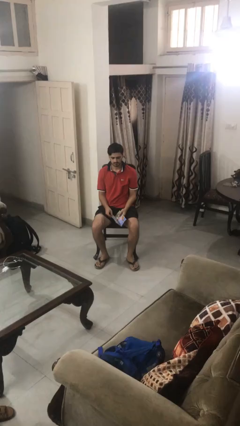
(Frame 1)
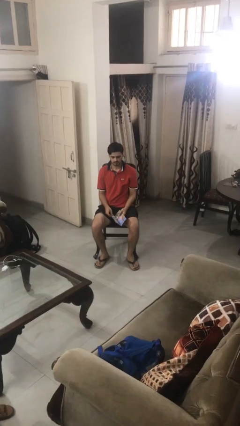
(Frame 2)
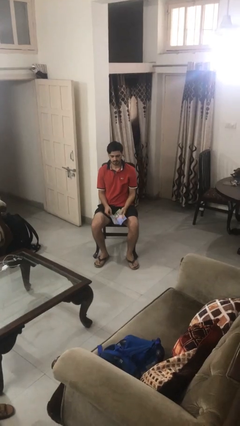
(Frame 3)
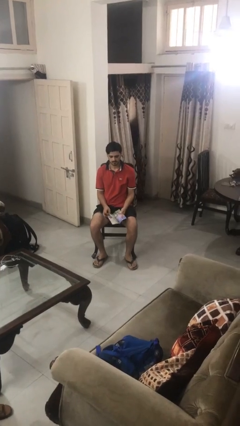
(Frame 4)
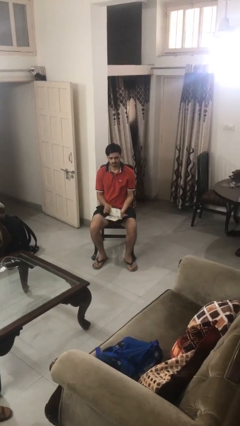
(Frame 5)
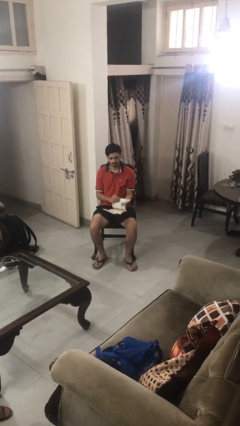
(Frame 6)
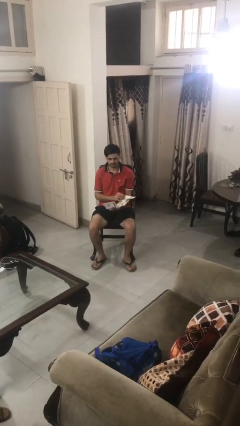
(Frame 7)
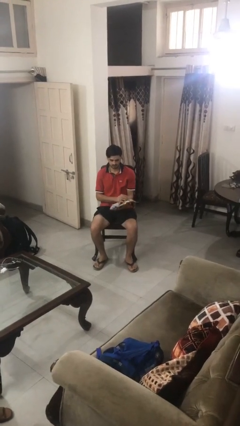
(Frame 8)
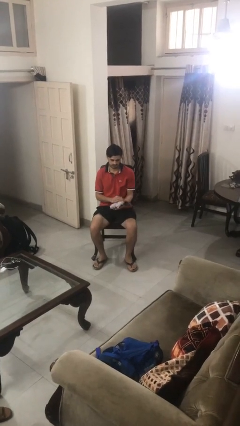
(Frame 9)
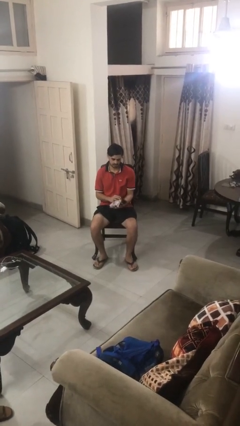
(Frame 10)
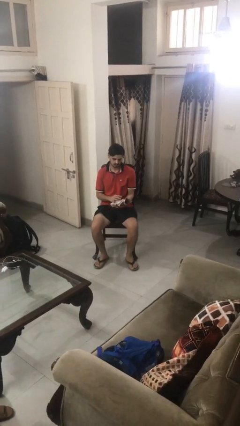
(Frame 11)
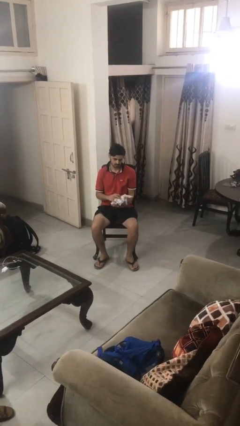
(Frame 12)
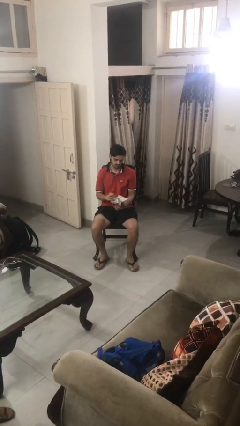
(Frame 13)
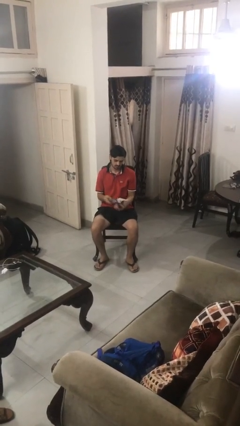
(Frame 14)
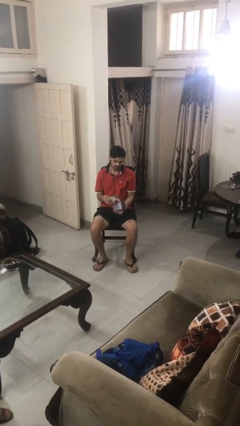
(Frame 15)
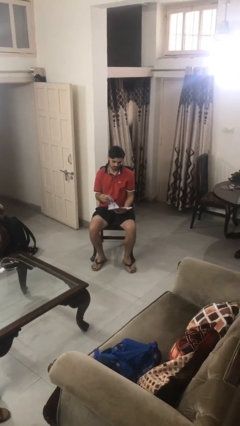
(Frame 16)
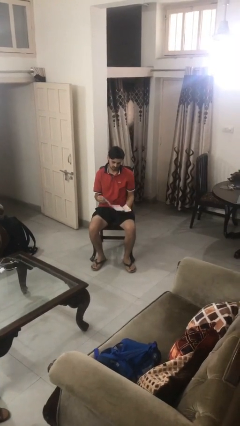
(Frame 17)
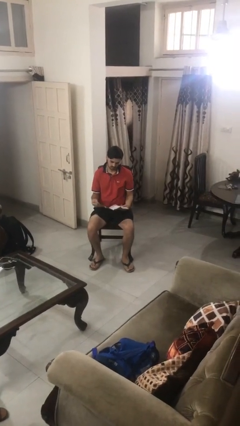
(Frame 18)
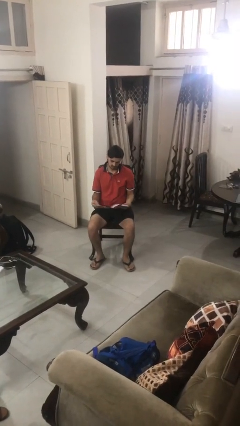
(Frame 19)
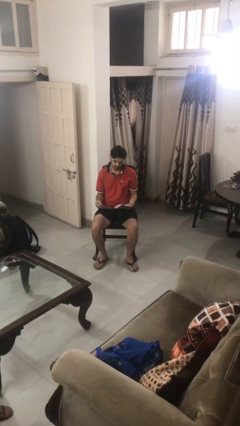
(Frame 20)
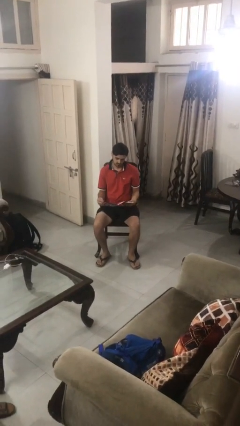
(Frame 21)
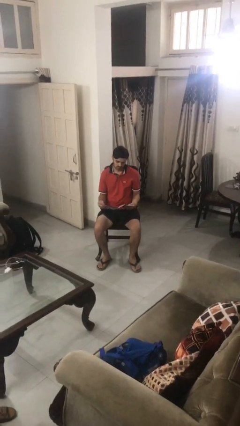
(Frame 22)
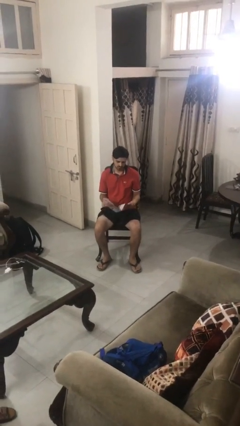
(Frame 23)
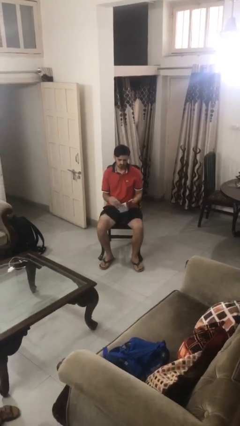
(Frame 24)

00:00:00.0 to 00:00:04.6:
person reads magazine

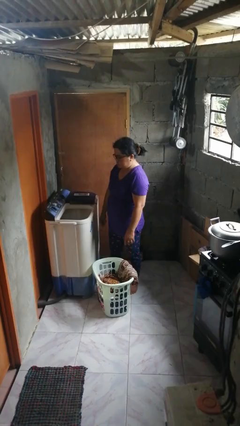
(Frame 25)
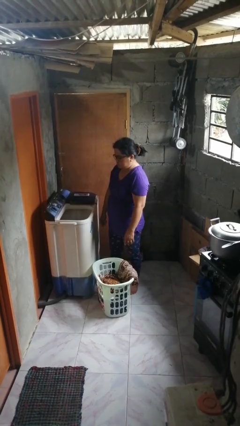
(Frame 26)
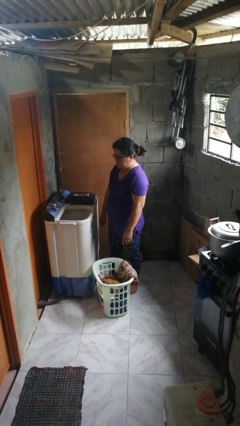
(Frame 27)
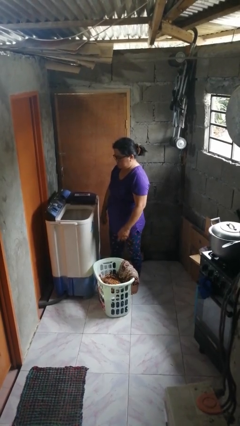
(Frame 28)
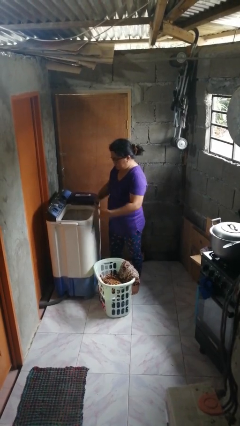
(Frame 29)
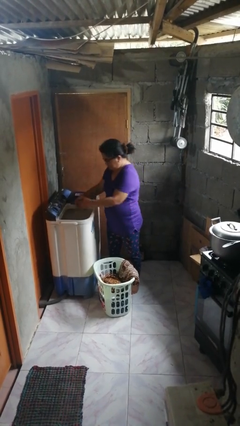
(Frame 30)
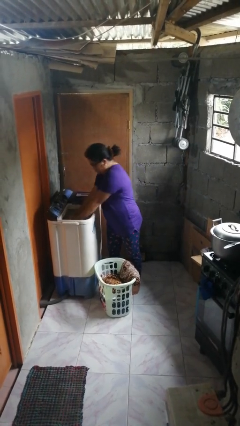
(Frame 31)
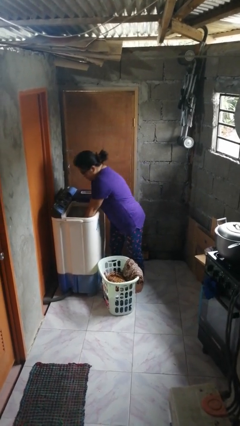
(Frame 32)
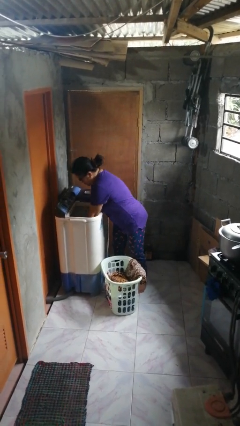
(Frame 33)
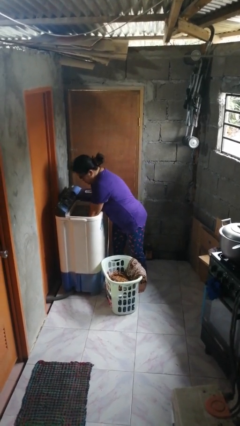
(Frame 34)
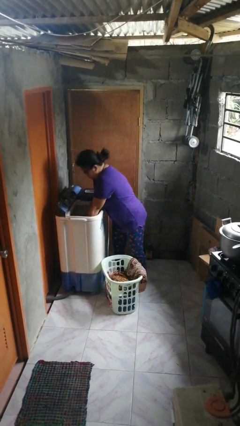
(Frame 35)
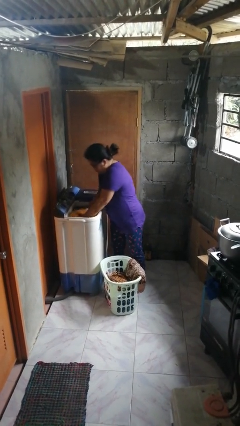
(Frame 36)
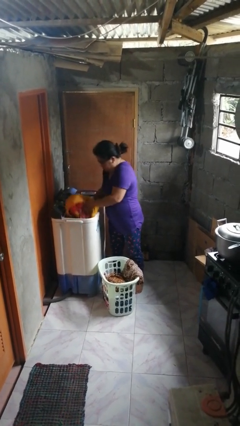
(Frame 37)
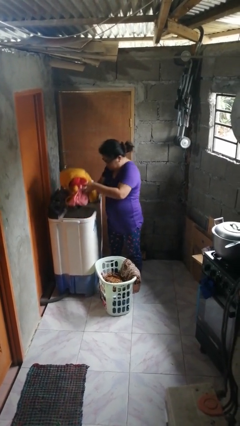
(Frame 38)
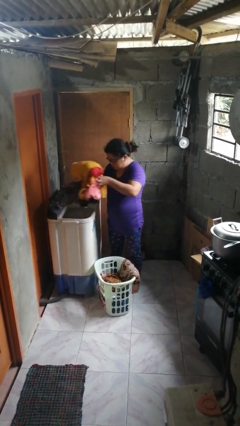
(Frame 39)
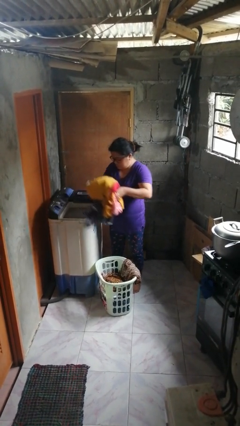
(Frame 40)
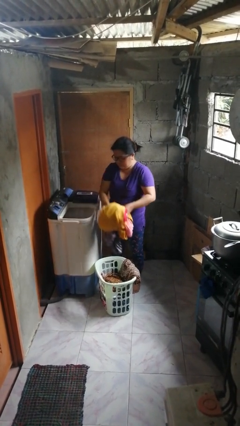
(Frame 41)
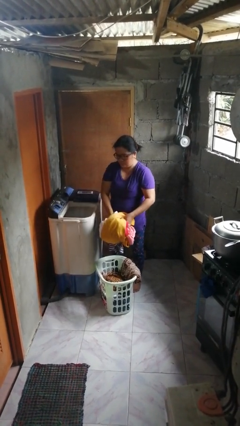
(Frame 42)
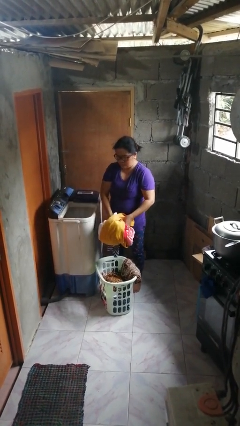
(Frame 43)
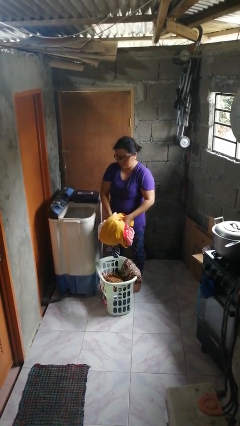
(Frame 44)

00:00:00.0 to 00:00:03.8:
person unloads clotheswasher

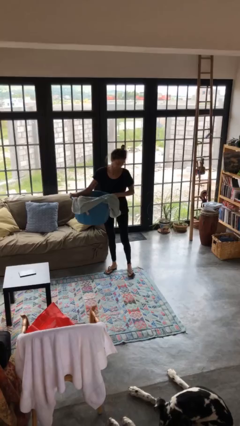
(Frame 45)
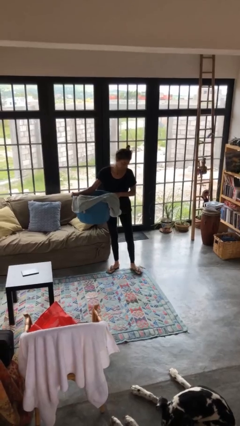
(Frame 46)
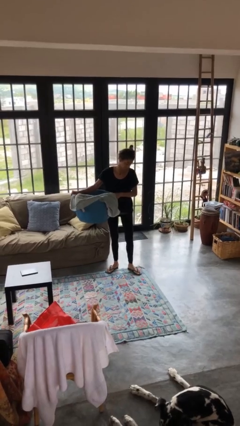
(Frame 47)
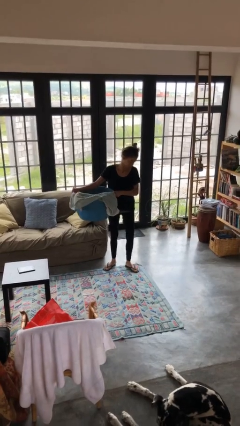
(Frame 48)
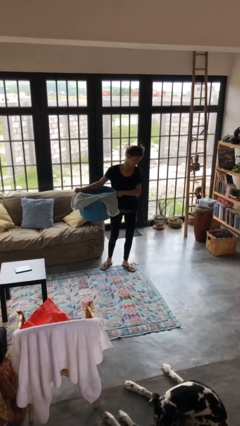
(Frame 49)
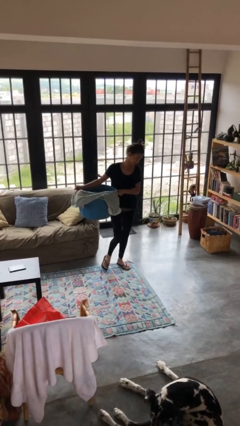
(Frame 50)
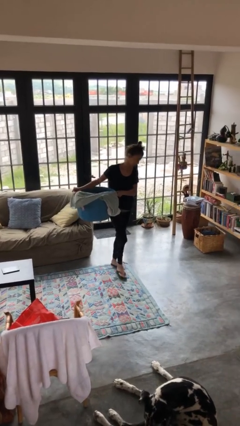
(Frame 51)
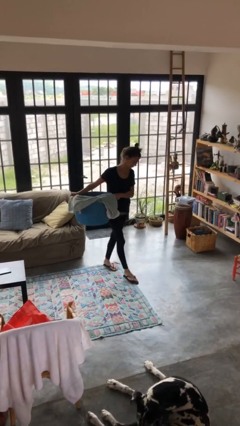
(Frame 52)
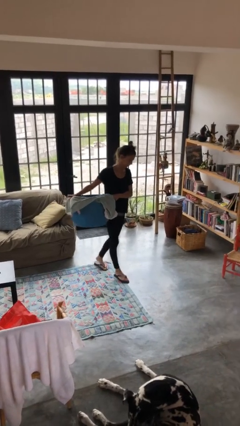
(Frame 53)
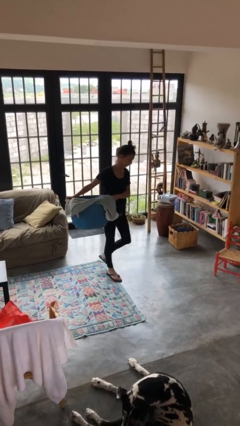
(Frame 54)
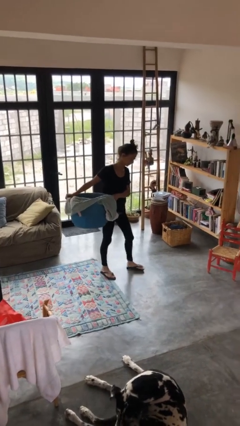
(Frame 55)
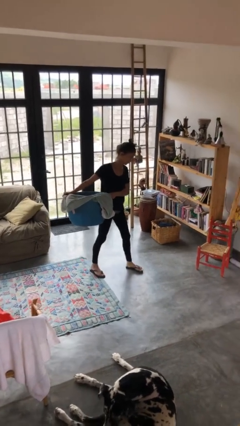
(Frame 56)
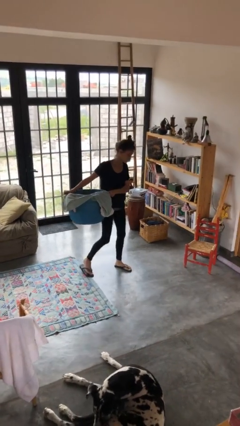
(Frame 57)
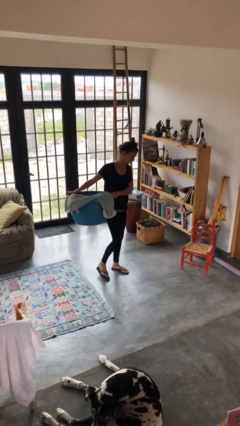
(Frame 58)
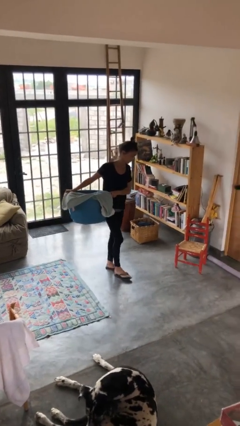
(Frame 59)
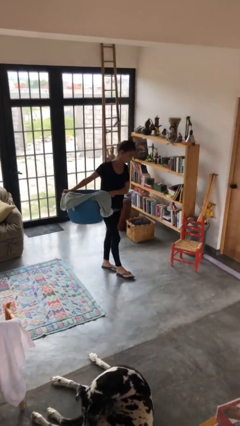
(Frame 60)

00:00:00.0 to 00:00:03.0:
person carries laundry basket

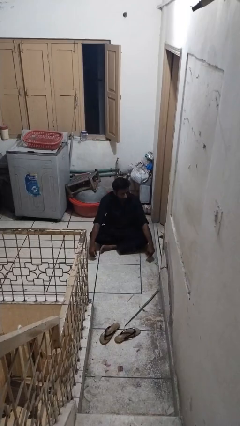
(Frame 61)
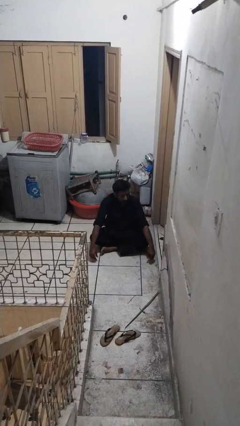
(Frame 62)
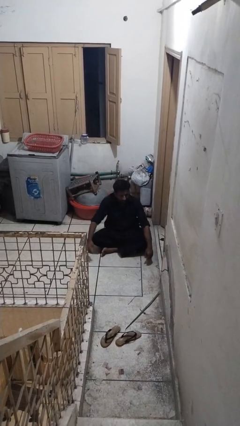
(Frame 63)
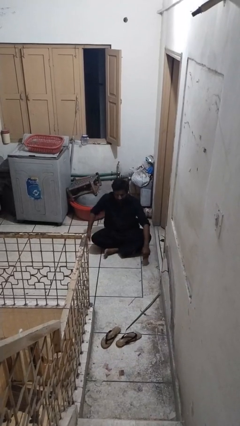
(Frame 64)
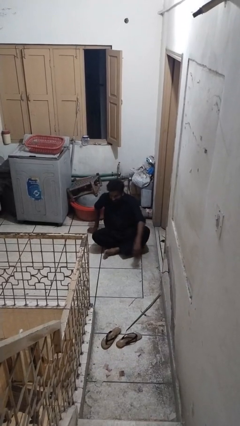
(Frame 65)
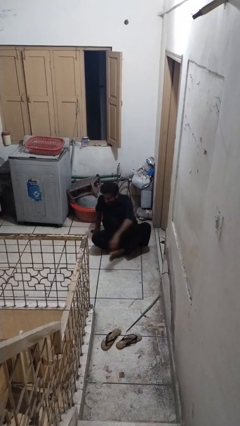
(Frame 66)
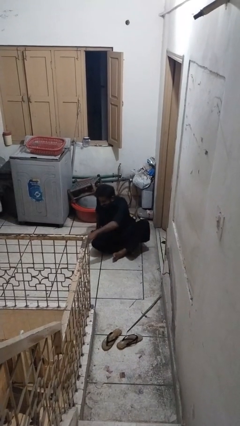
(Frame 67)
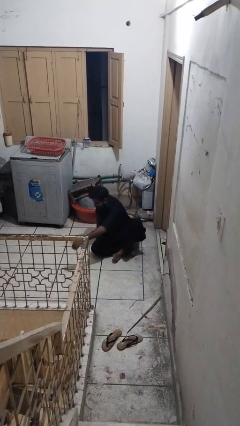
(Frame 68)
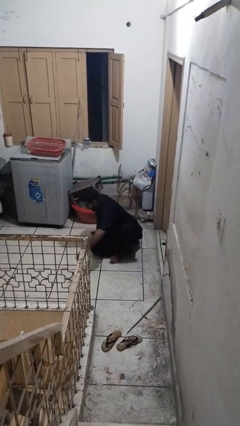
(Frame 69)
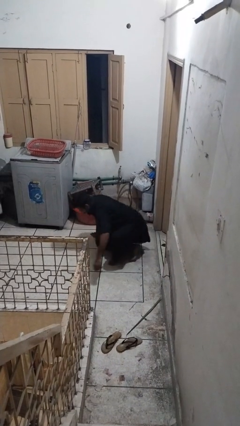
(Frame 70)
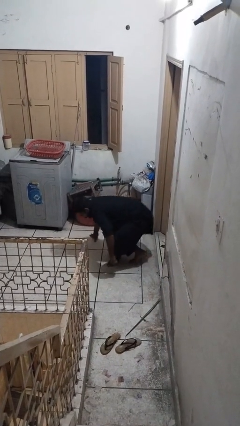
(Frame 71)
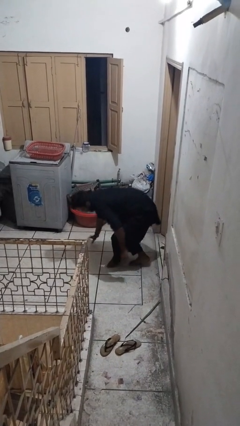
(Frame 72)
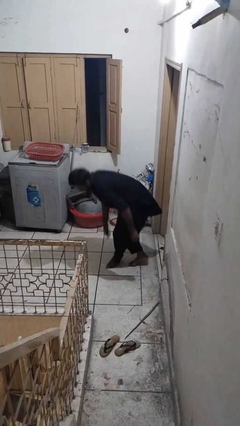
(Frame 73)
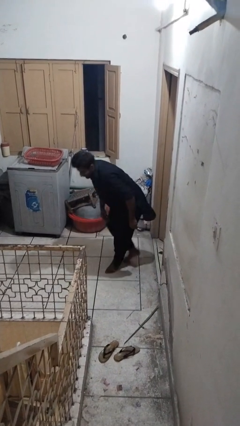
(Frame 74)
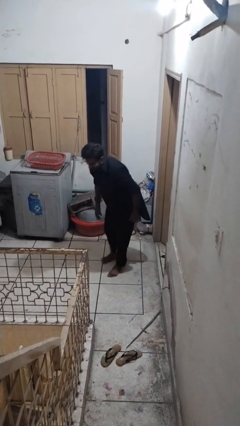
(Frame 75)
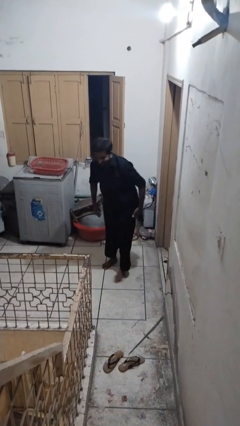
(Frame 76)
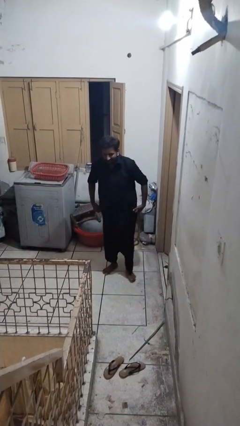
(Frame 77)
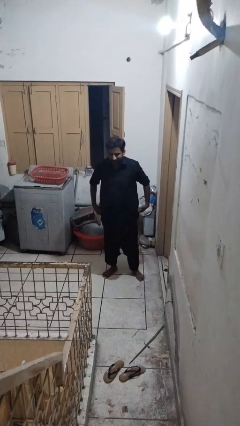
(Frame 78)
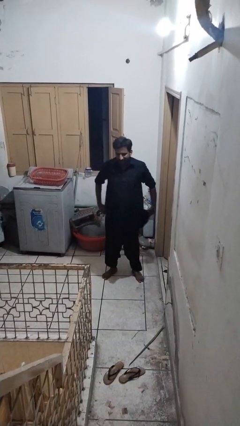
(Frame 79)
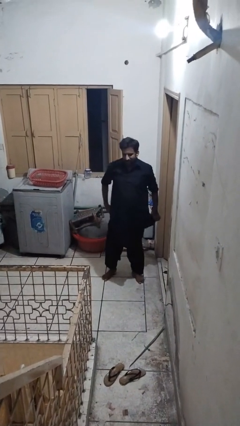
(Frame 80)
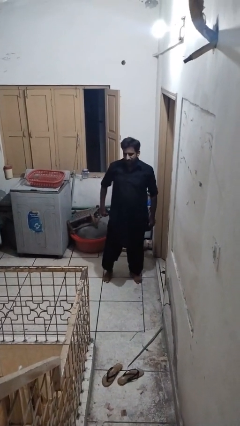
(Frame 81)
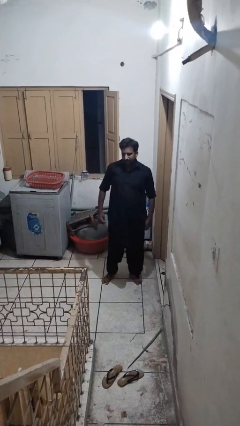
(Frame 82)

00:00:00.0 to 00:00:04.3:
person stands up from floor

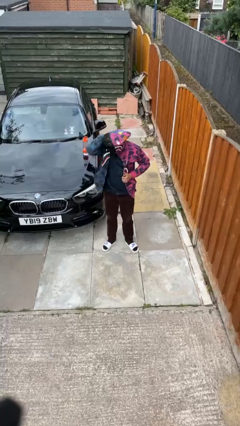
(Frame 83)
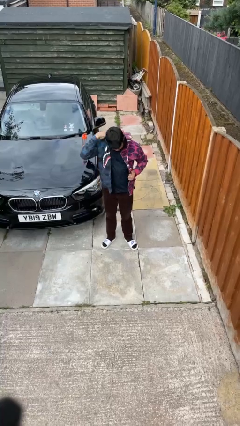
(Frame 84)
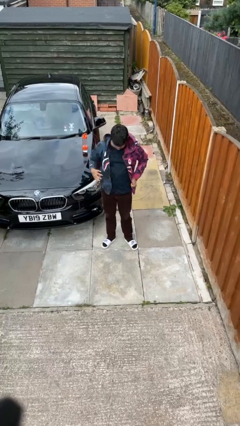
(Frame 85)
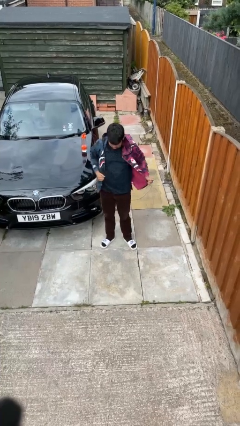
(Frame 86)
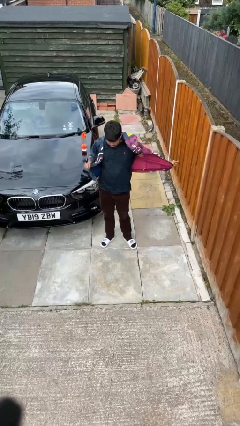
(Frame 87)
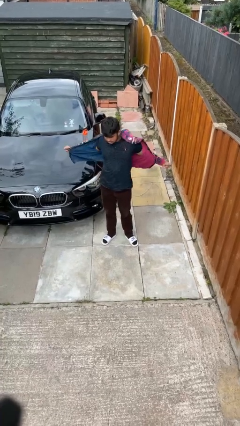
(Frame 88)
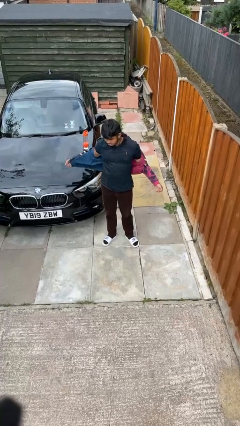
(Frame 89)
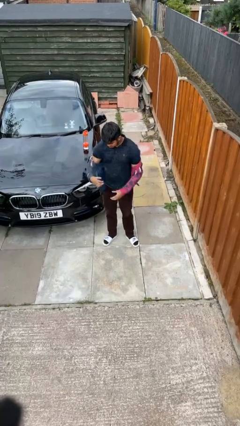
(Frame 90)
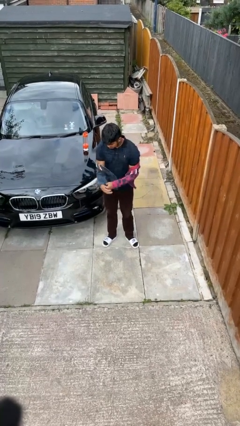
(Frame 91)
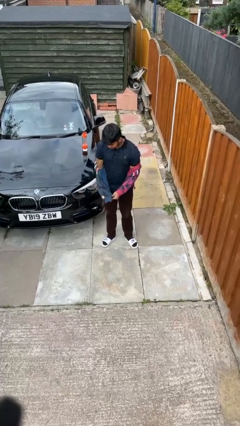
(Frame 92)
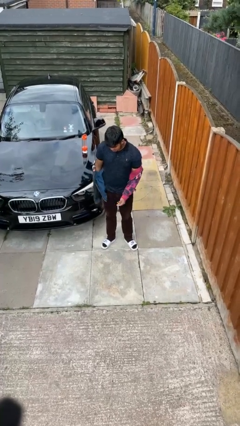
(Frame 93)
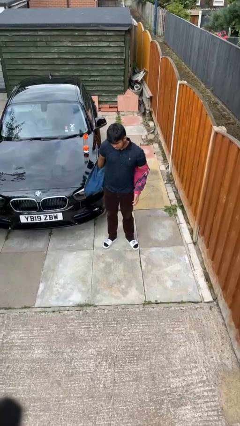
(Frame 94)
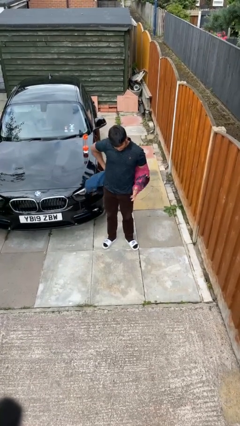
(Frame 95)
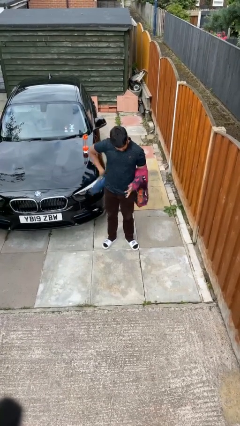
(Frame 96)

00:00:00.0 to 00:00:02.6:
person takes off jacket
